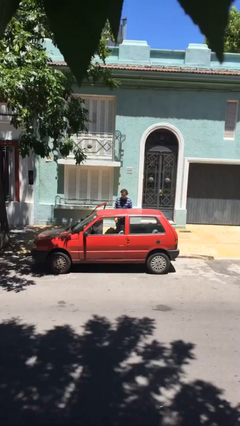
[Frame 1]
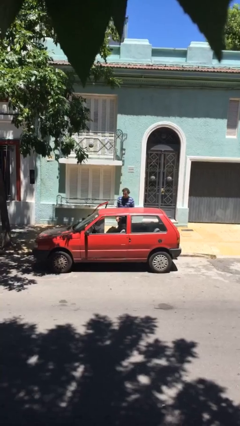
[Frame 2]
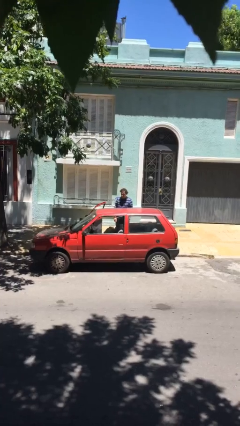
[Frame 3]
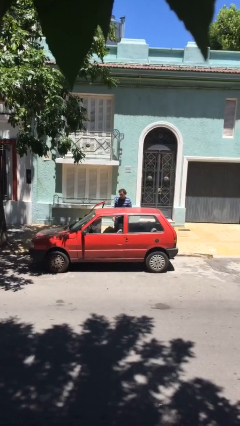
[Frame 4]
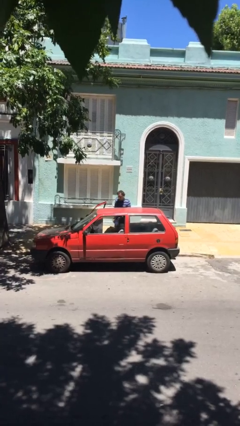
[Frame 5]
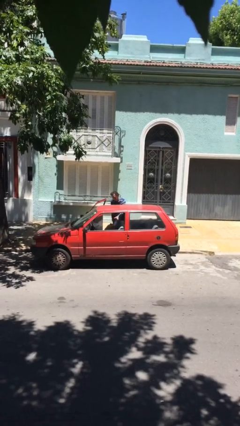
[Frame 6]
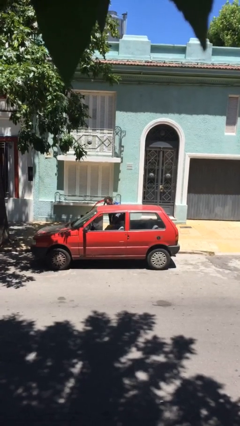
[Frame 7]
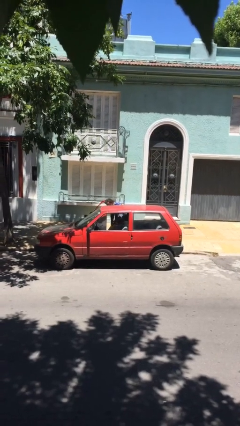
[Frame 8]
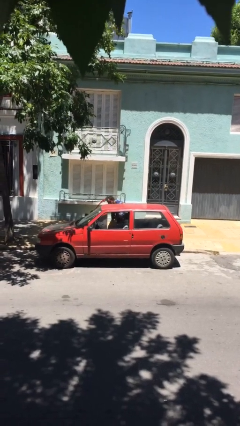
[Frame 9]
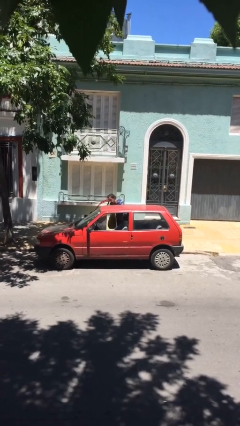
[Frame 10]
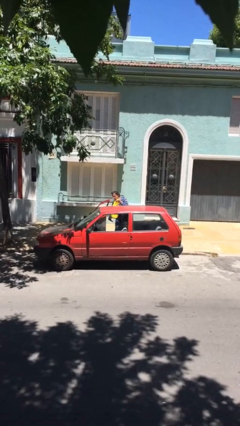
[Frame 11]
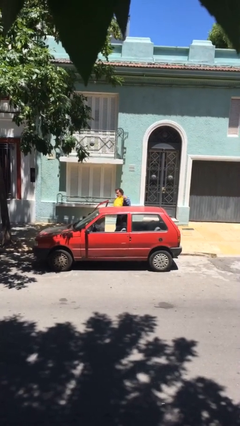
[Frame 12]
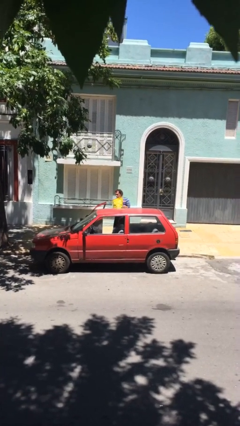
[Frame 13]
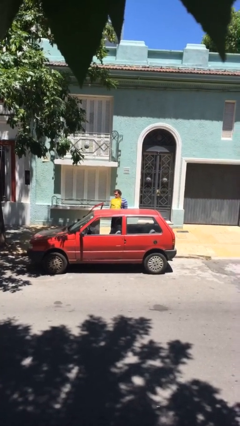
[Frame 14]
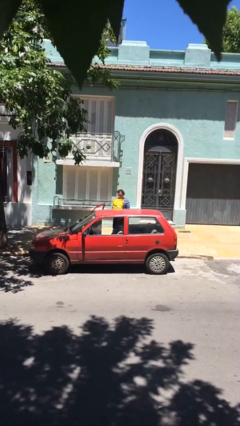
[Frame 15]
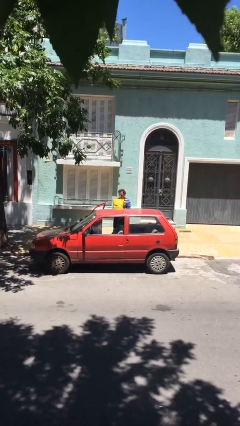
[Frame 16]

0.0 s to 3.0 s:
person unloads car

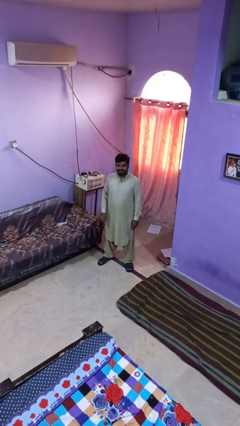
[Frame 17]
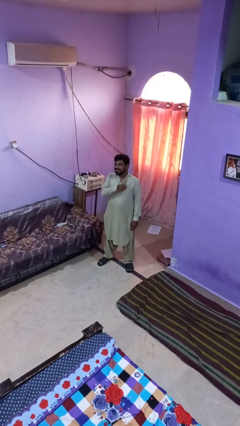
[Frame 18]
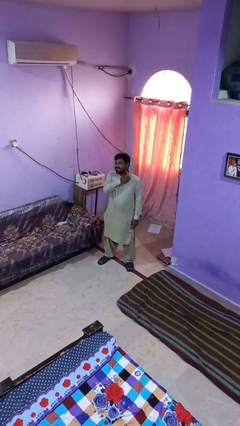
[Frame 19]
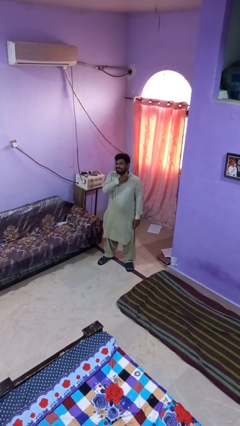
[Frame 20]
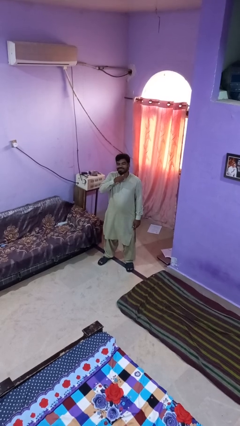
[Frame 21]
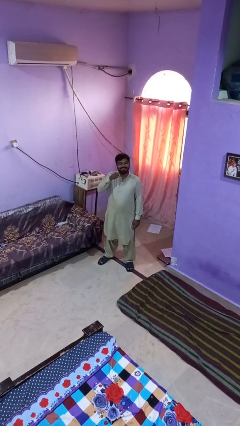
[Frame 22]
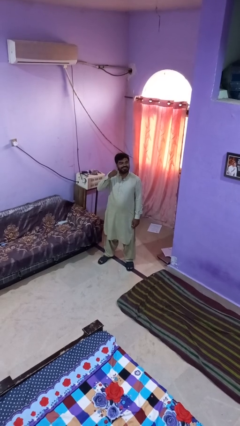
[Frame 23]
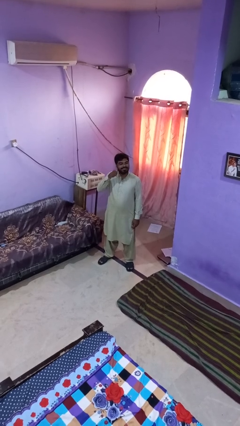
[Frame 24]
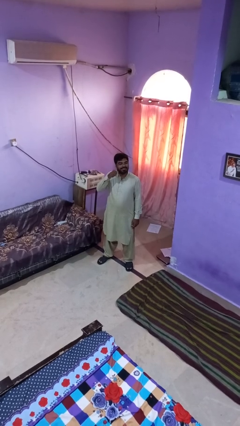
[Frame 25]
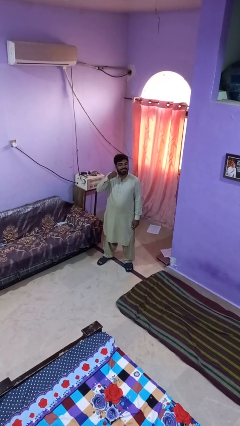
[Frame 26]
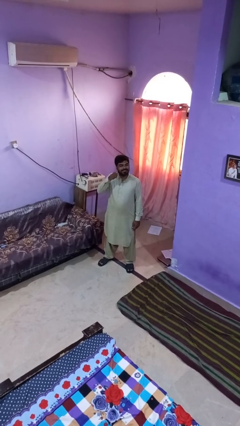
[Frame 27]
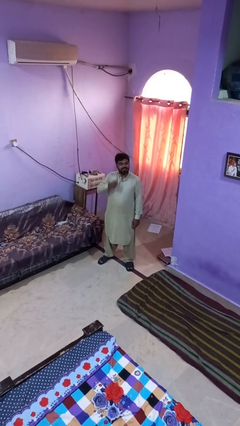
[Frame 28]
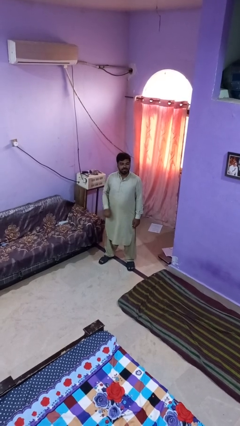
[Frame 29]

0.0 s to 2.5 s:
person gestures cut

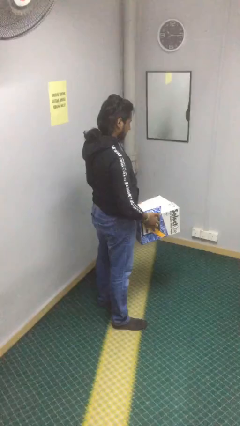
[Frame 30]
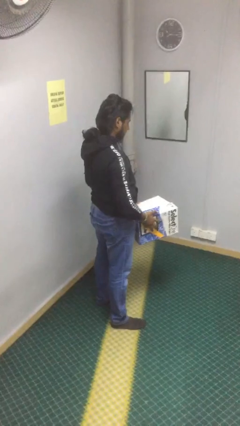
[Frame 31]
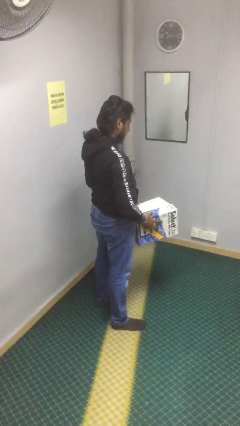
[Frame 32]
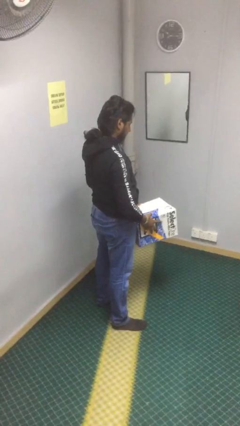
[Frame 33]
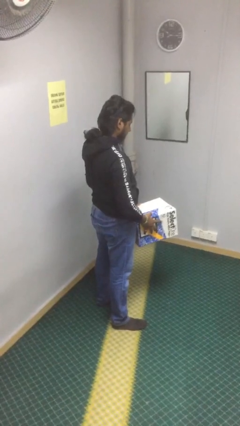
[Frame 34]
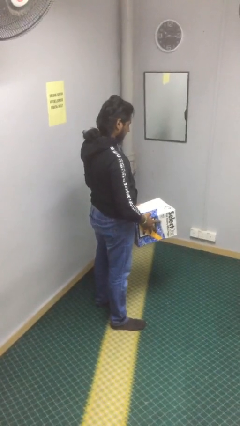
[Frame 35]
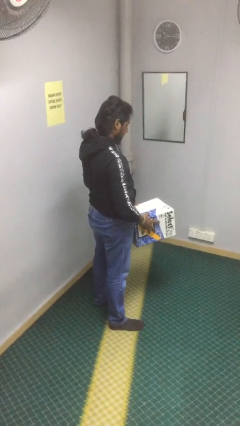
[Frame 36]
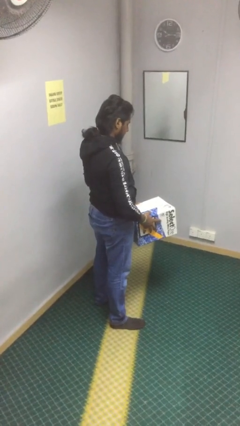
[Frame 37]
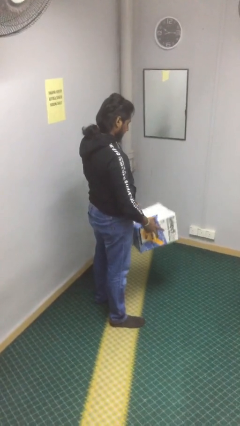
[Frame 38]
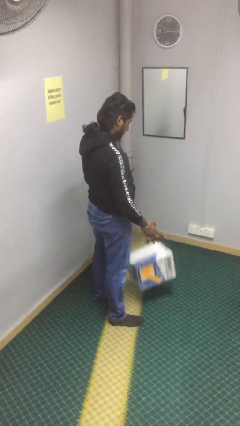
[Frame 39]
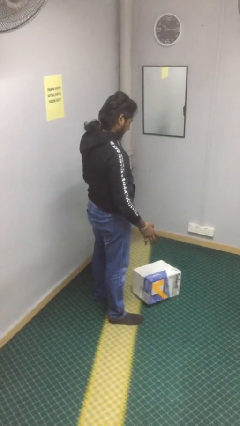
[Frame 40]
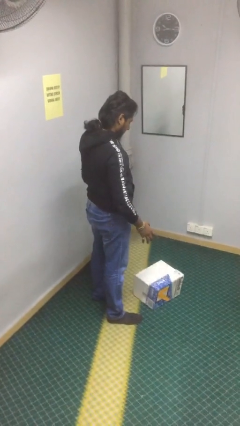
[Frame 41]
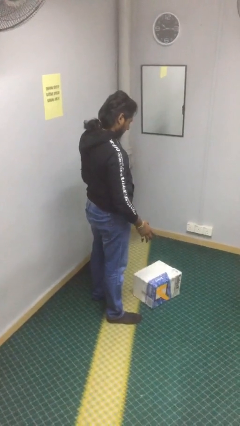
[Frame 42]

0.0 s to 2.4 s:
person drops object

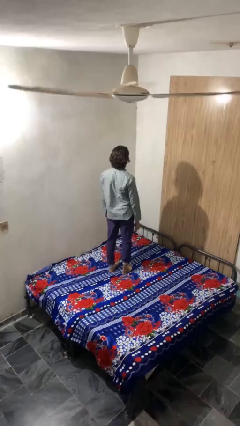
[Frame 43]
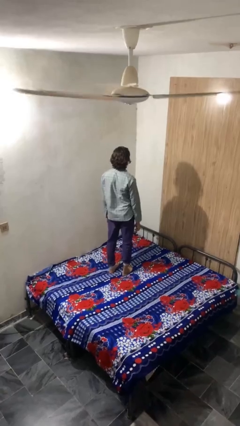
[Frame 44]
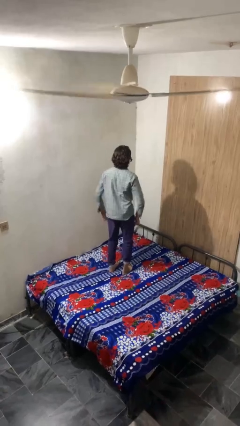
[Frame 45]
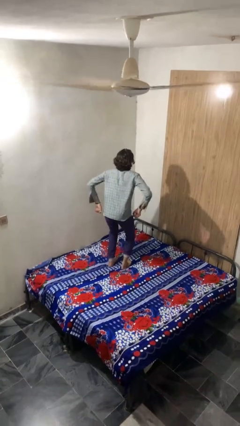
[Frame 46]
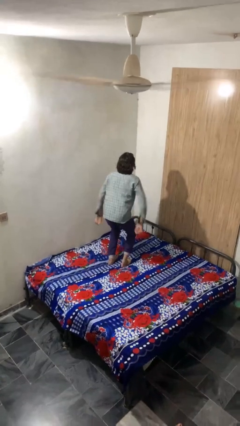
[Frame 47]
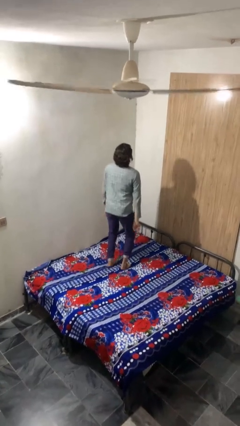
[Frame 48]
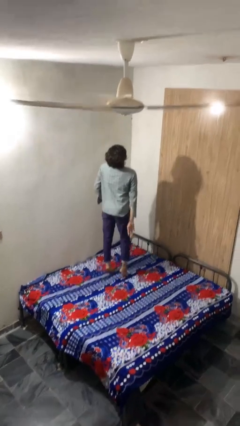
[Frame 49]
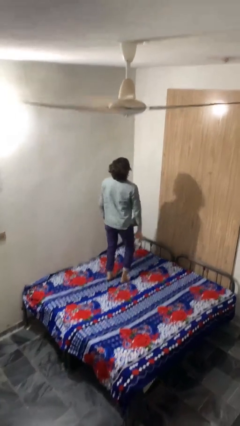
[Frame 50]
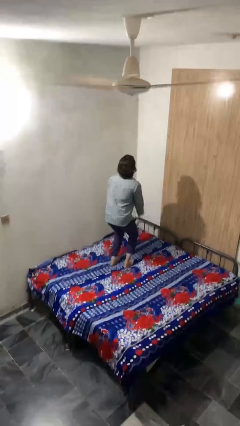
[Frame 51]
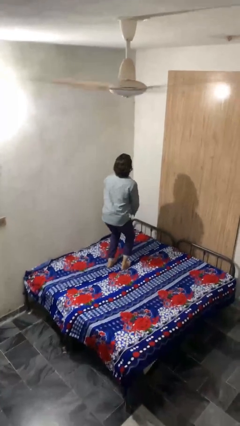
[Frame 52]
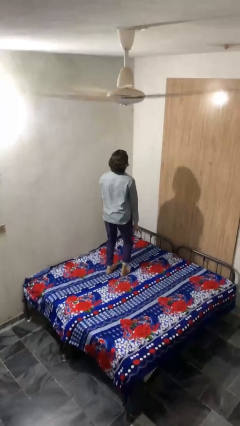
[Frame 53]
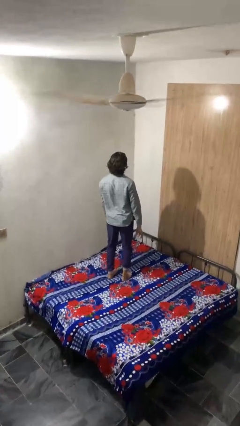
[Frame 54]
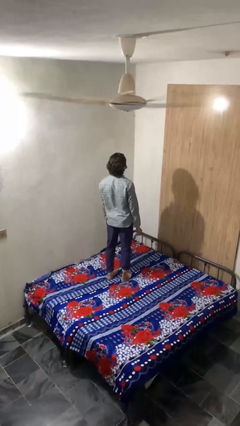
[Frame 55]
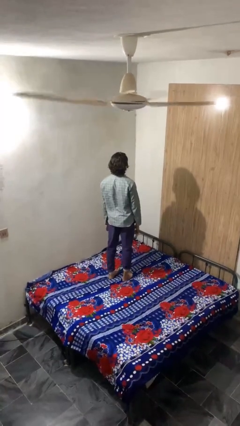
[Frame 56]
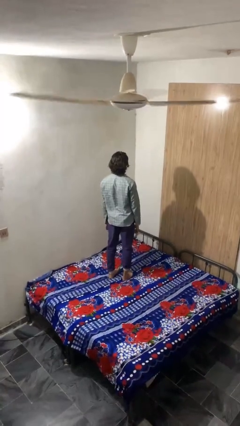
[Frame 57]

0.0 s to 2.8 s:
person jumps on bed

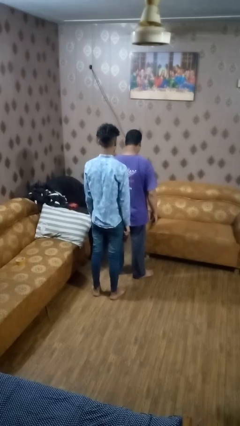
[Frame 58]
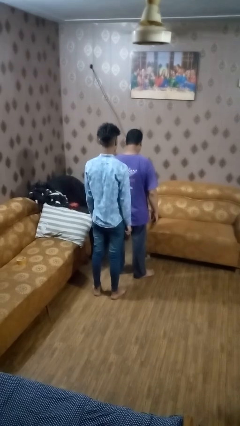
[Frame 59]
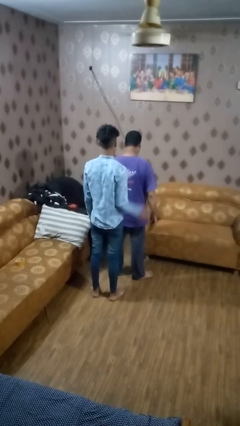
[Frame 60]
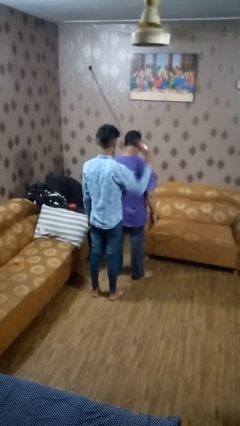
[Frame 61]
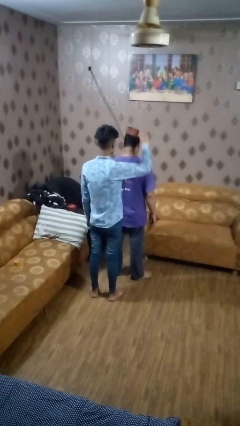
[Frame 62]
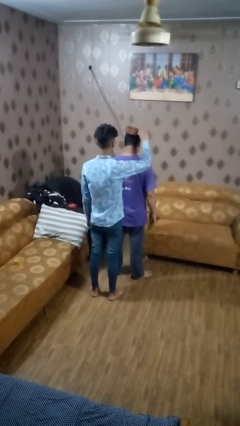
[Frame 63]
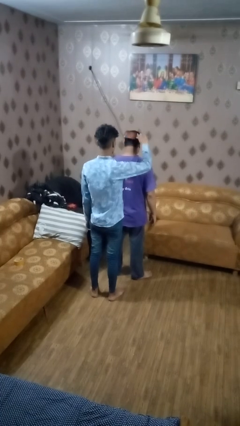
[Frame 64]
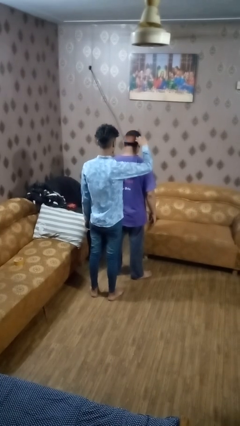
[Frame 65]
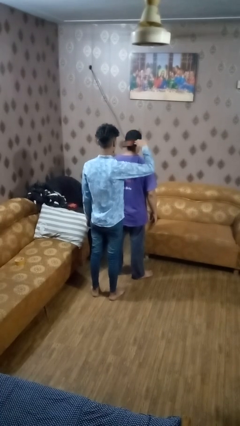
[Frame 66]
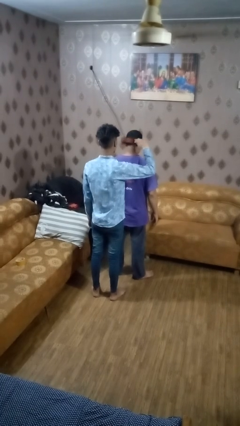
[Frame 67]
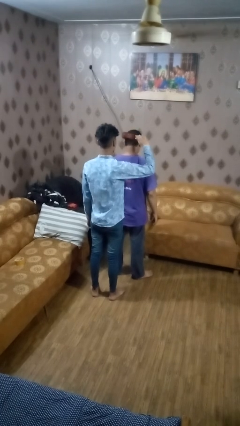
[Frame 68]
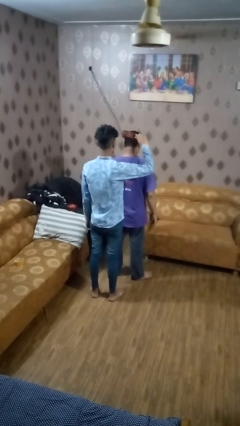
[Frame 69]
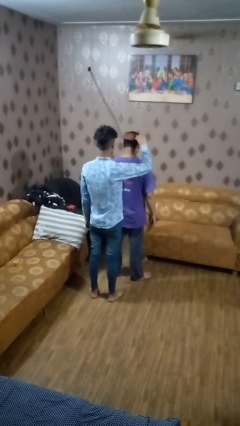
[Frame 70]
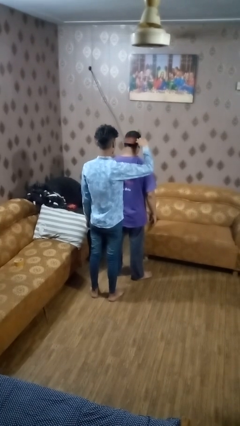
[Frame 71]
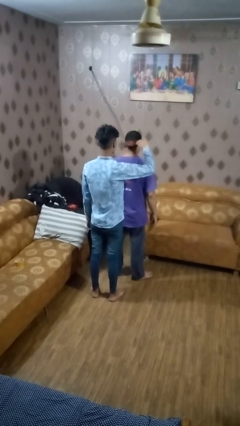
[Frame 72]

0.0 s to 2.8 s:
person brushes hair of person

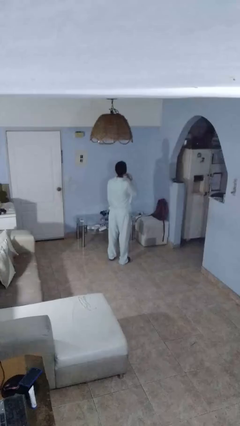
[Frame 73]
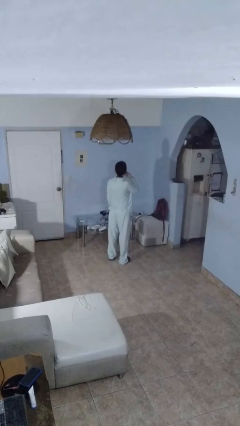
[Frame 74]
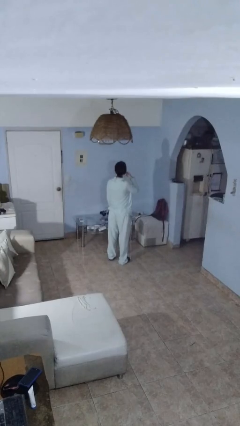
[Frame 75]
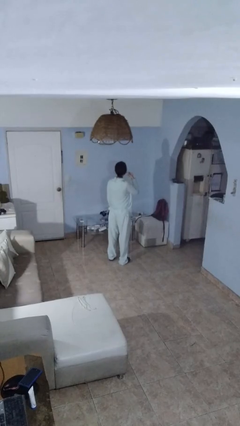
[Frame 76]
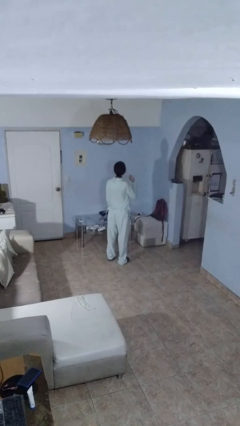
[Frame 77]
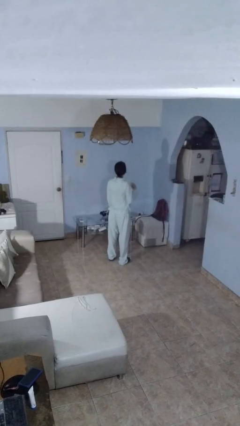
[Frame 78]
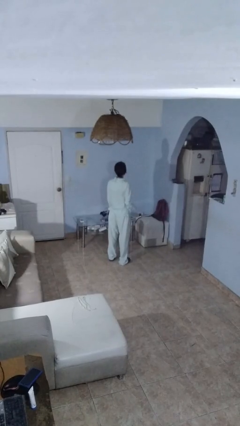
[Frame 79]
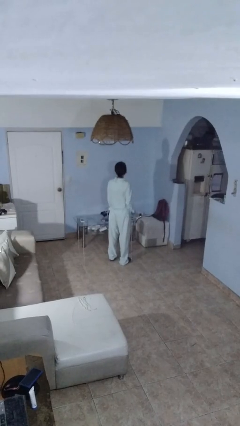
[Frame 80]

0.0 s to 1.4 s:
person takes off earrings

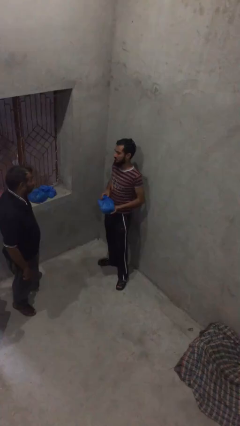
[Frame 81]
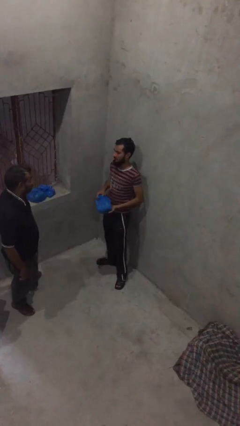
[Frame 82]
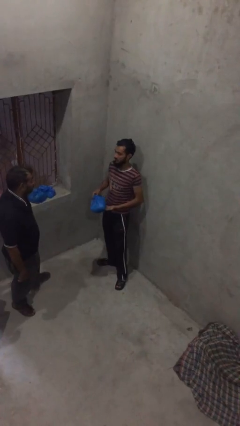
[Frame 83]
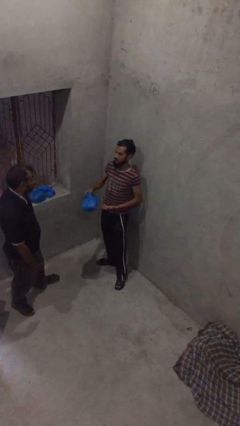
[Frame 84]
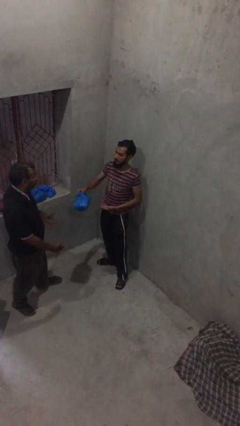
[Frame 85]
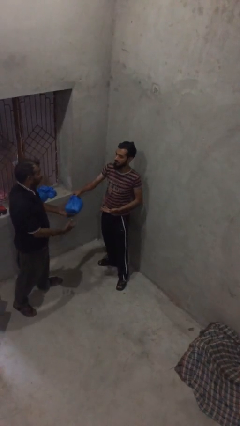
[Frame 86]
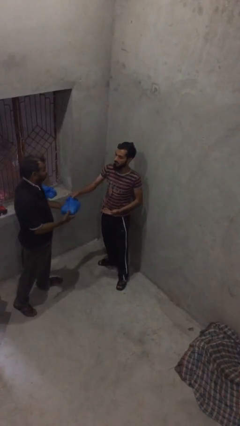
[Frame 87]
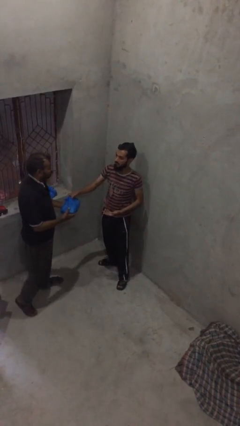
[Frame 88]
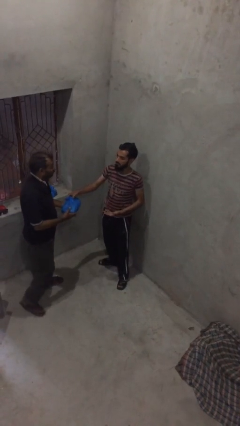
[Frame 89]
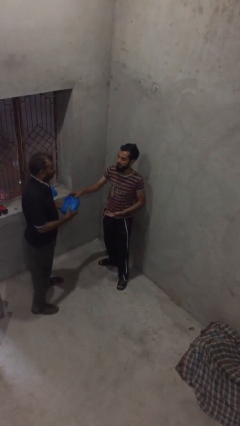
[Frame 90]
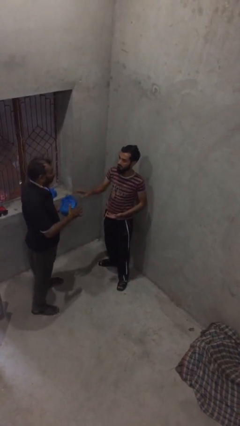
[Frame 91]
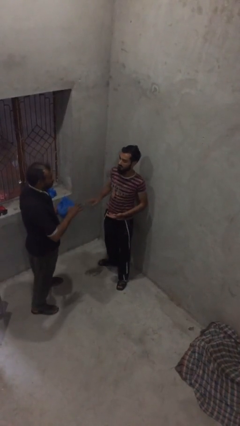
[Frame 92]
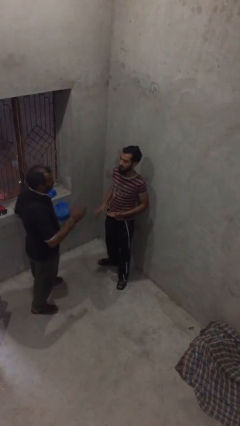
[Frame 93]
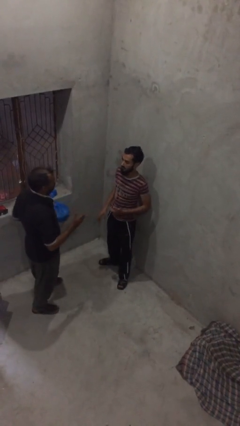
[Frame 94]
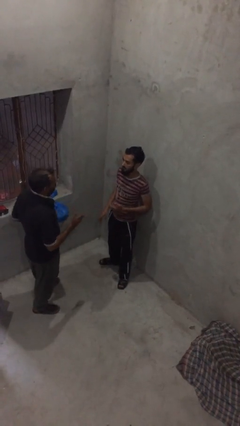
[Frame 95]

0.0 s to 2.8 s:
person transfers object to person
